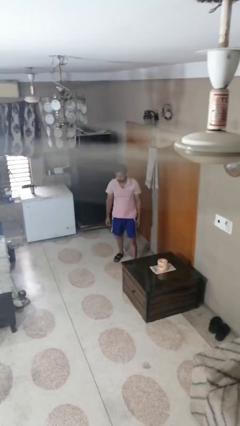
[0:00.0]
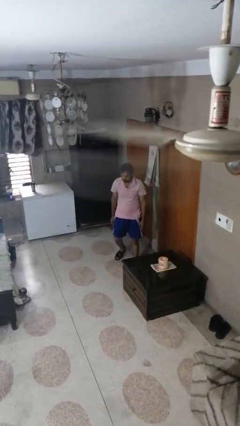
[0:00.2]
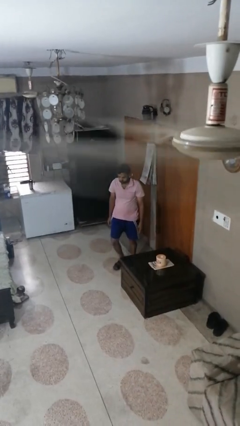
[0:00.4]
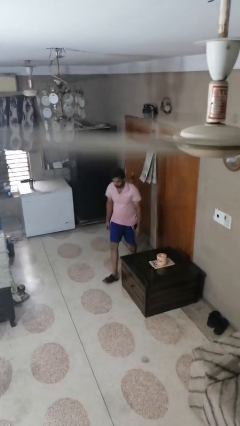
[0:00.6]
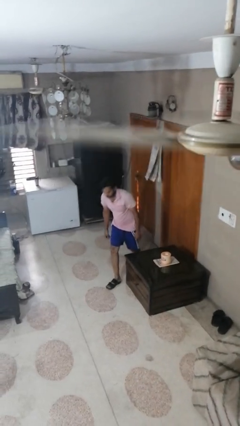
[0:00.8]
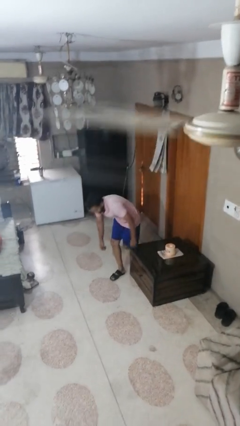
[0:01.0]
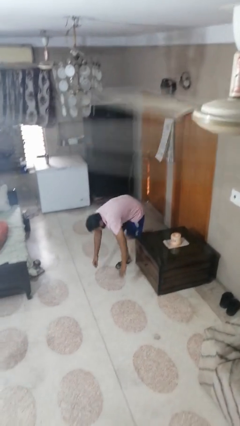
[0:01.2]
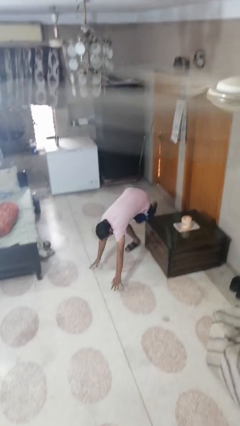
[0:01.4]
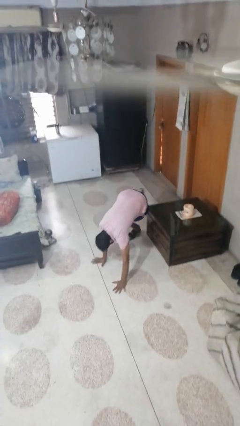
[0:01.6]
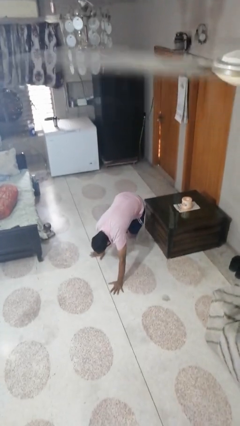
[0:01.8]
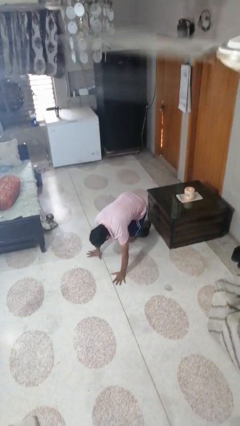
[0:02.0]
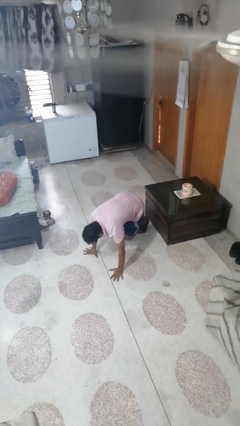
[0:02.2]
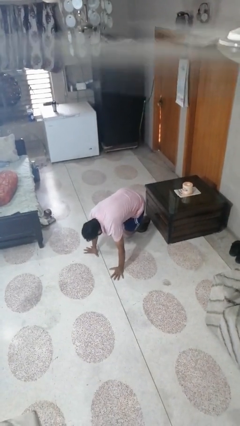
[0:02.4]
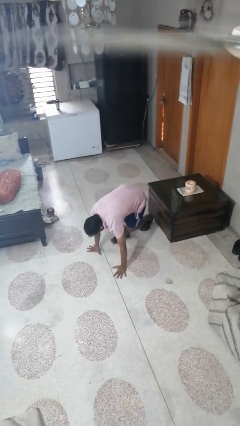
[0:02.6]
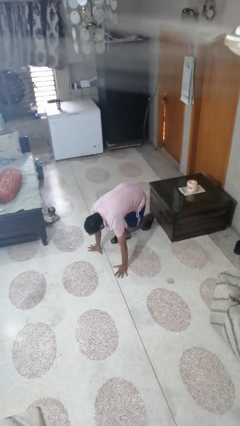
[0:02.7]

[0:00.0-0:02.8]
person bumps into table

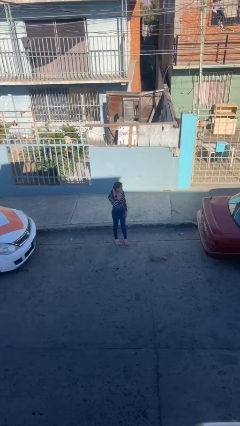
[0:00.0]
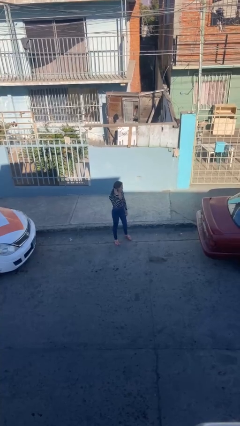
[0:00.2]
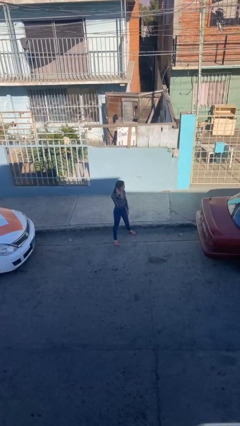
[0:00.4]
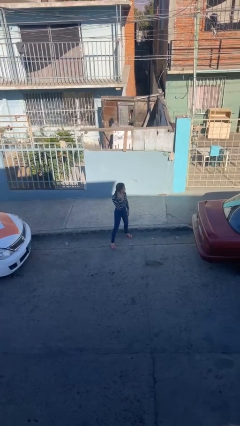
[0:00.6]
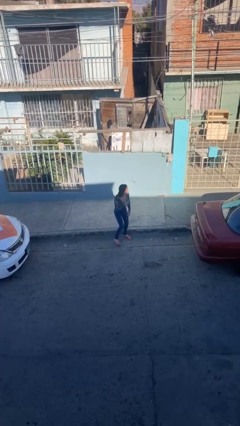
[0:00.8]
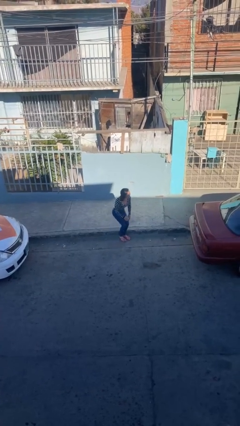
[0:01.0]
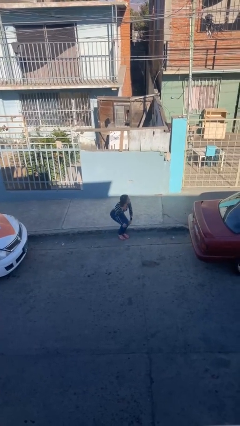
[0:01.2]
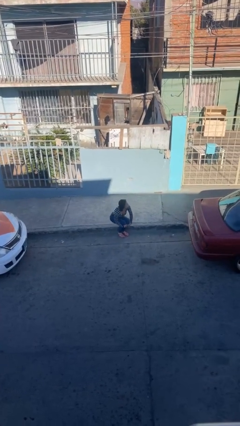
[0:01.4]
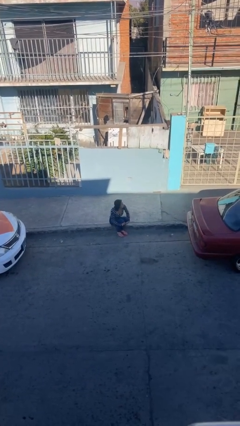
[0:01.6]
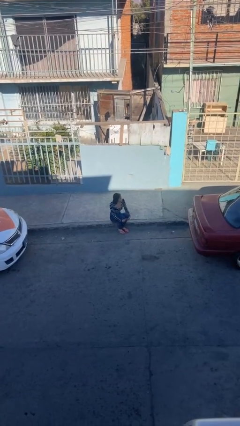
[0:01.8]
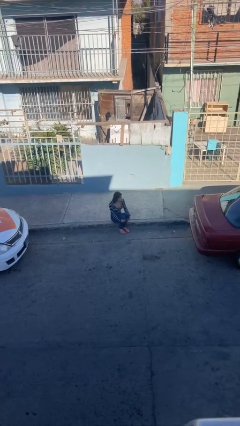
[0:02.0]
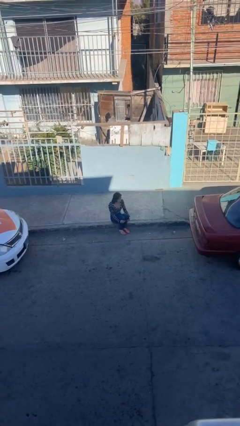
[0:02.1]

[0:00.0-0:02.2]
person sits down

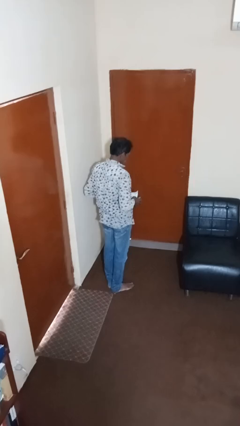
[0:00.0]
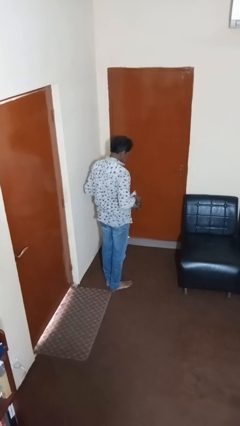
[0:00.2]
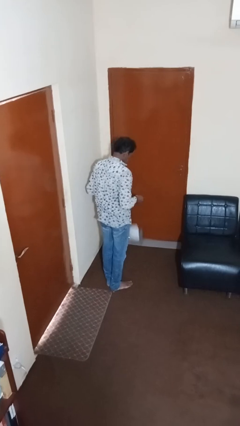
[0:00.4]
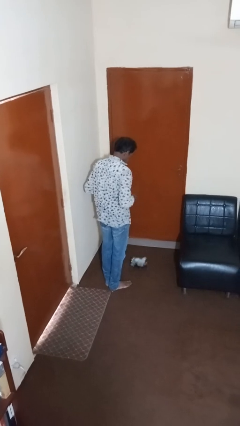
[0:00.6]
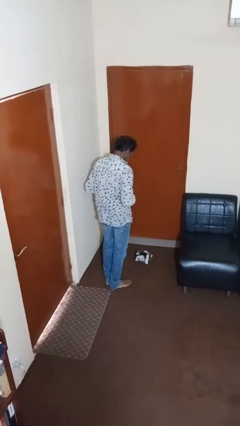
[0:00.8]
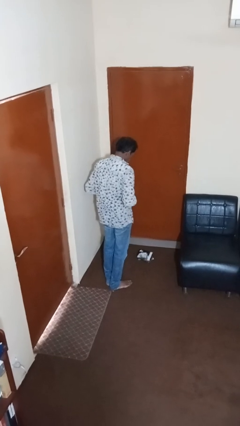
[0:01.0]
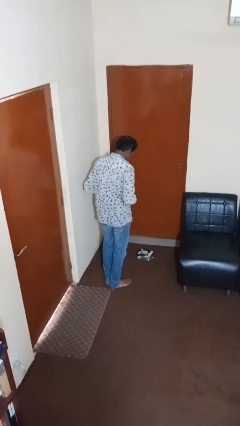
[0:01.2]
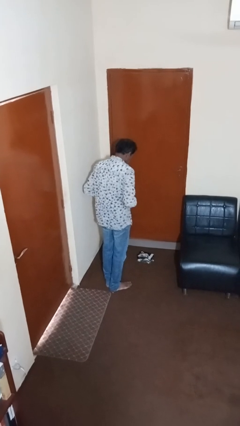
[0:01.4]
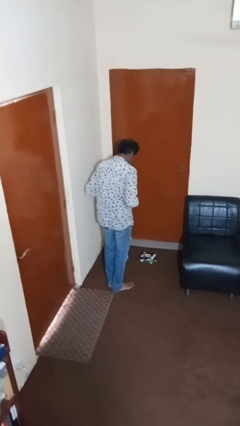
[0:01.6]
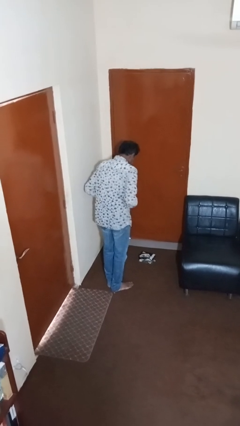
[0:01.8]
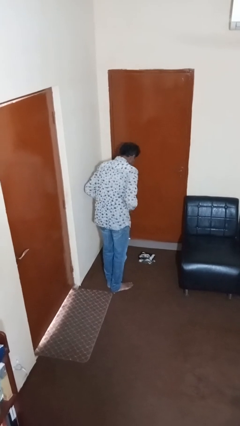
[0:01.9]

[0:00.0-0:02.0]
person drops object

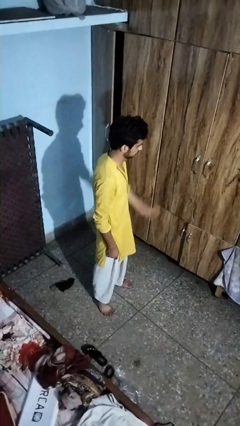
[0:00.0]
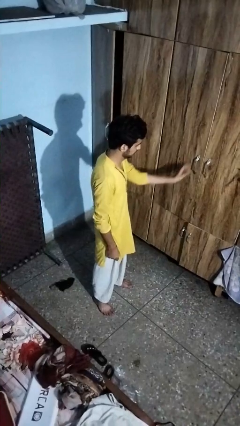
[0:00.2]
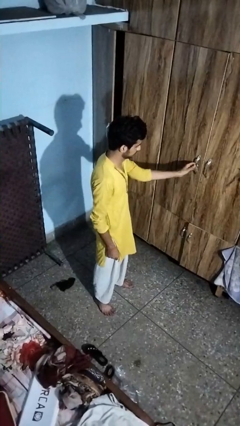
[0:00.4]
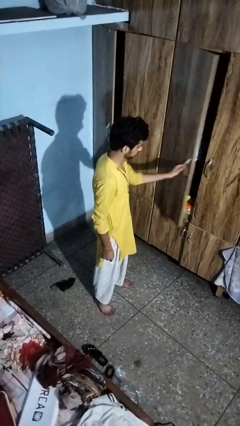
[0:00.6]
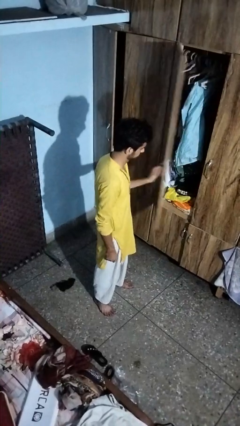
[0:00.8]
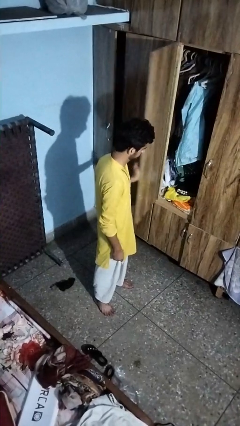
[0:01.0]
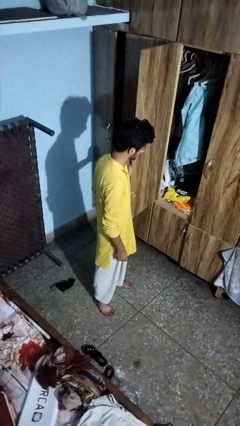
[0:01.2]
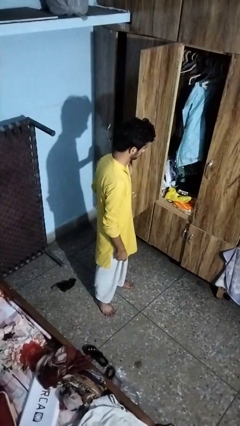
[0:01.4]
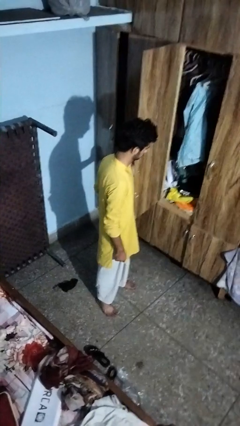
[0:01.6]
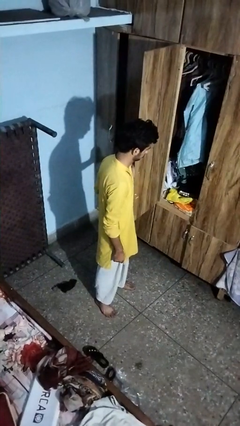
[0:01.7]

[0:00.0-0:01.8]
person opens closet door

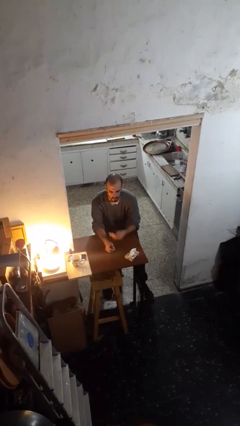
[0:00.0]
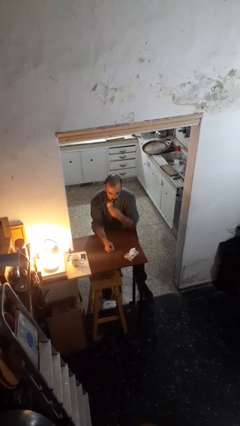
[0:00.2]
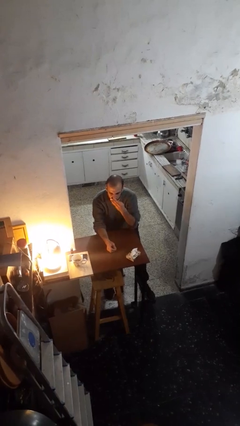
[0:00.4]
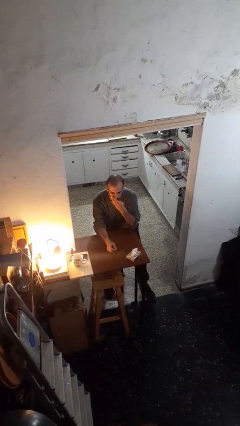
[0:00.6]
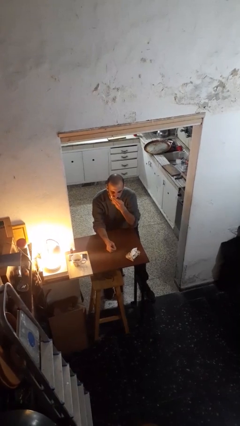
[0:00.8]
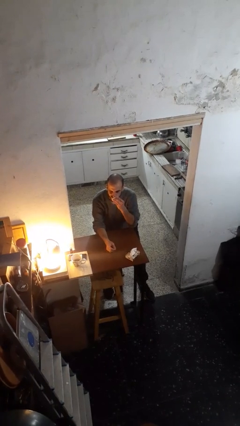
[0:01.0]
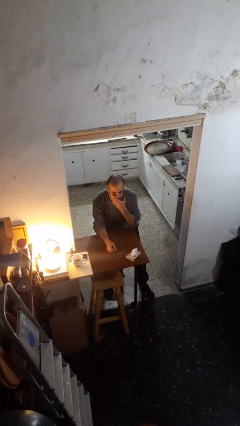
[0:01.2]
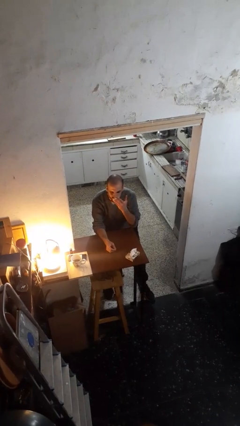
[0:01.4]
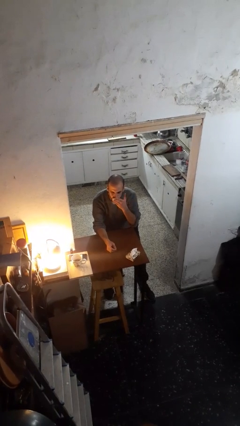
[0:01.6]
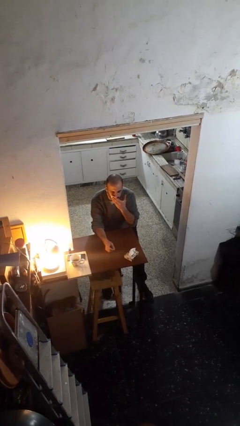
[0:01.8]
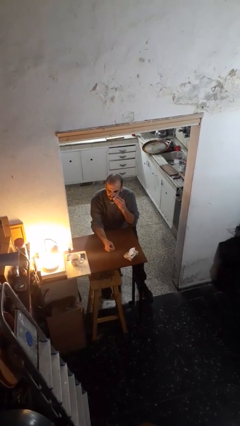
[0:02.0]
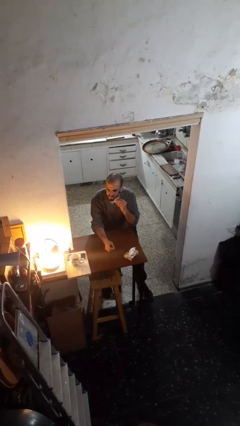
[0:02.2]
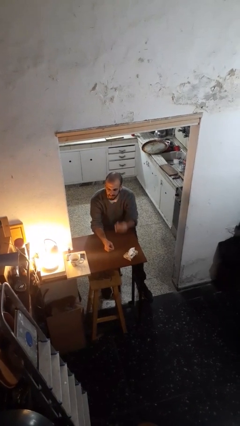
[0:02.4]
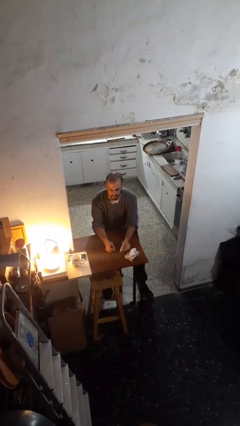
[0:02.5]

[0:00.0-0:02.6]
person wipes mouth with napkin

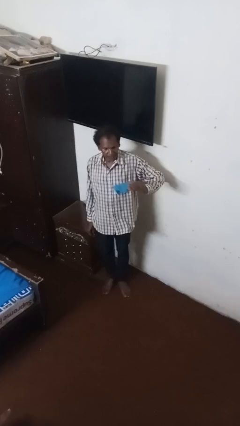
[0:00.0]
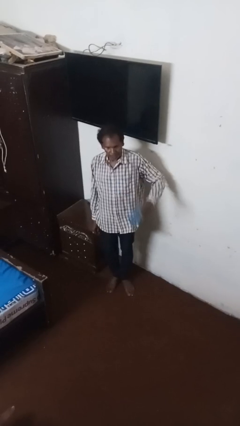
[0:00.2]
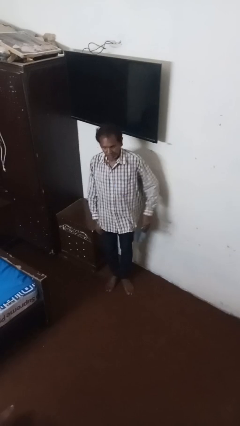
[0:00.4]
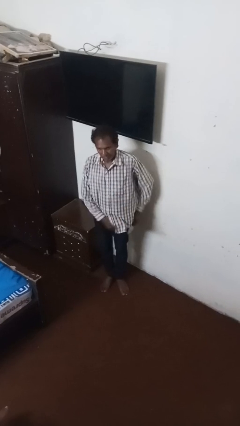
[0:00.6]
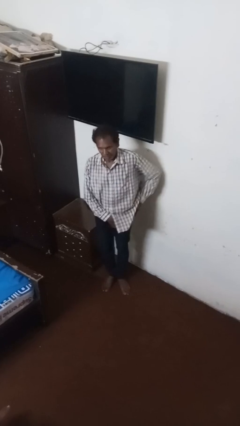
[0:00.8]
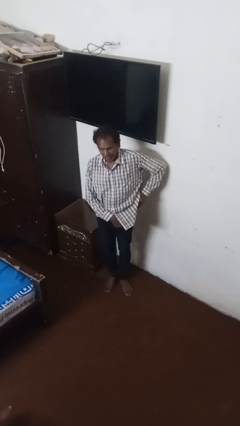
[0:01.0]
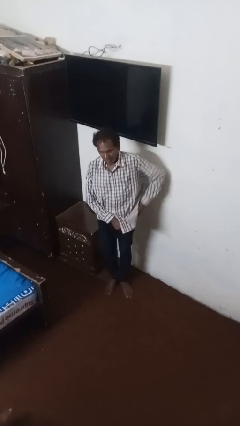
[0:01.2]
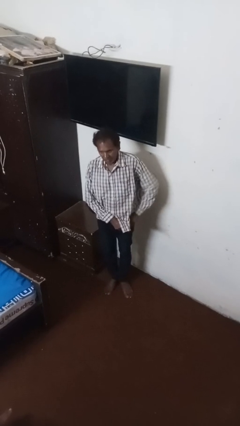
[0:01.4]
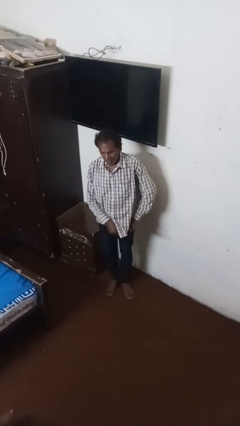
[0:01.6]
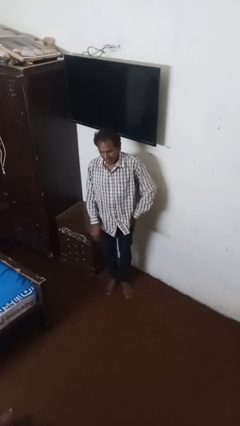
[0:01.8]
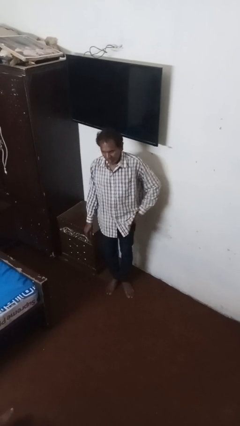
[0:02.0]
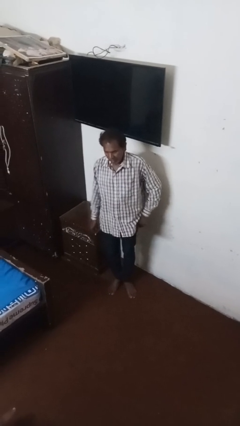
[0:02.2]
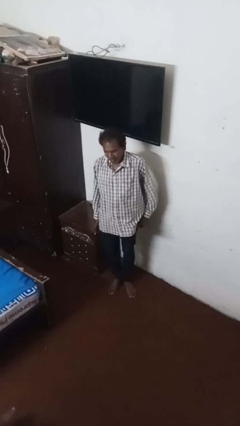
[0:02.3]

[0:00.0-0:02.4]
person puts phone into pocket

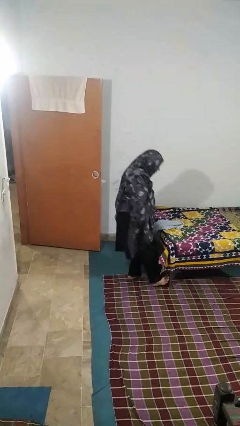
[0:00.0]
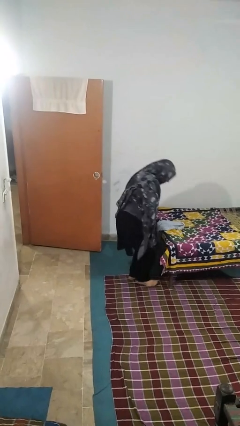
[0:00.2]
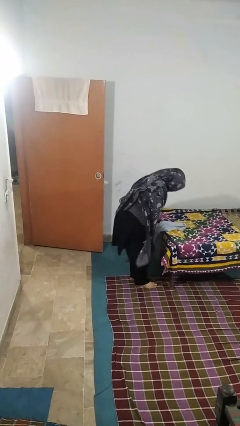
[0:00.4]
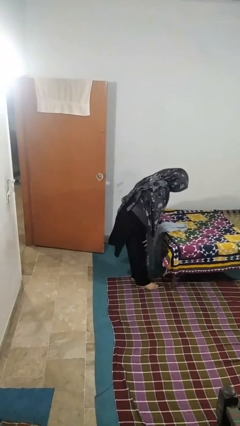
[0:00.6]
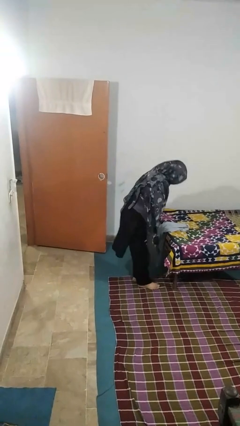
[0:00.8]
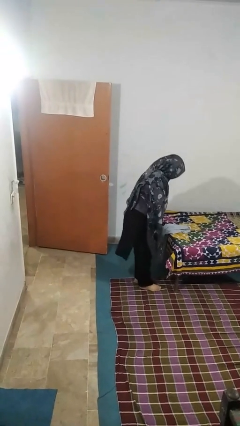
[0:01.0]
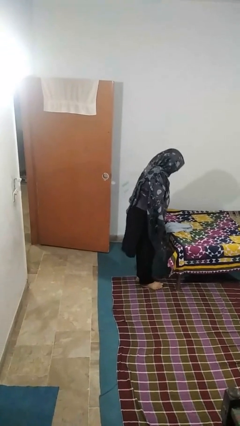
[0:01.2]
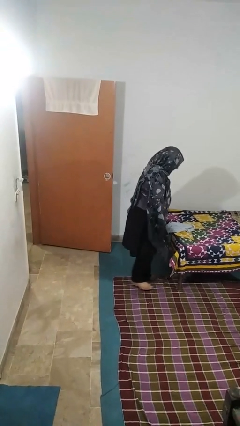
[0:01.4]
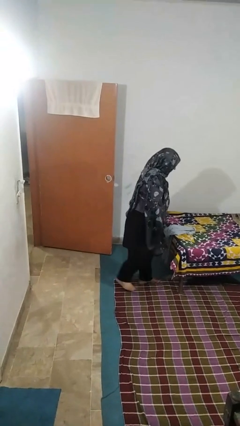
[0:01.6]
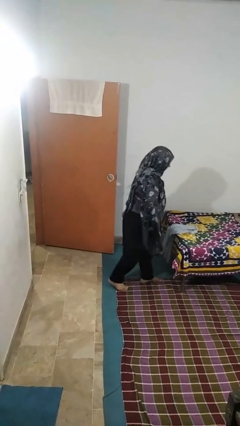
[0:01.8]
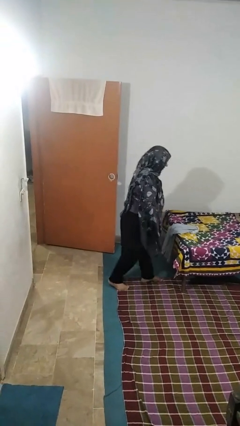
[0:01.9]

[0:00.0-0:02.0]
person stubs toe

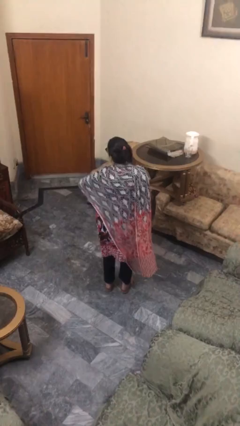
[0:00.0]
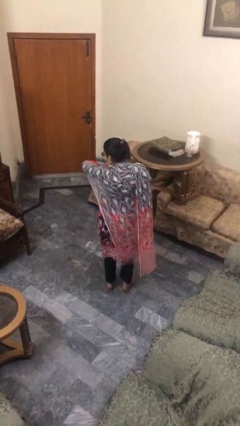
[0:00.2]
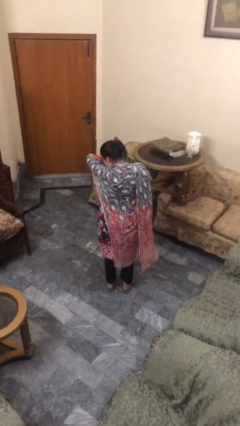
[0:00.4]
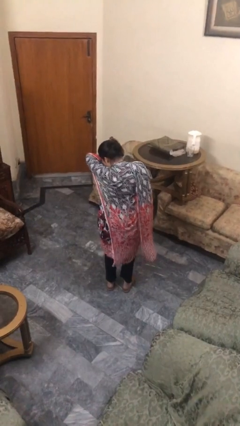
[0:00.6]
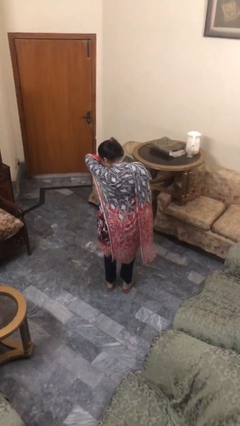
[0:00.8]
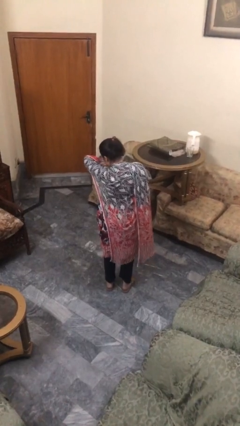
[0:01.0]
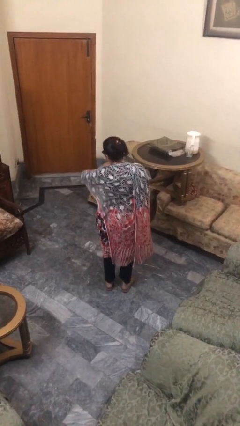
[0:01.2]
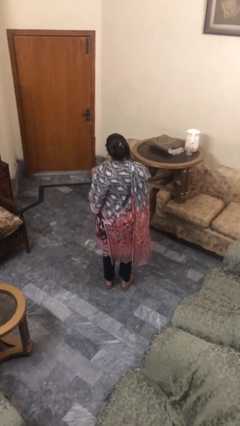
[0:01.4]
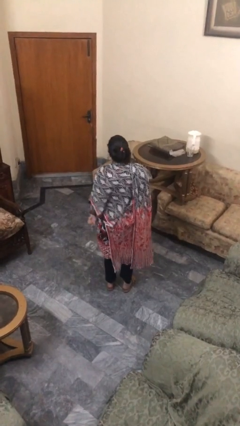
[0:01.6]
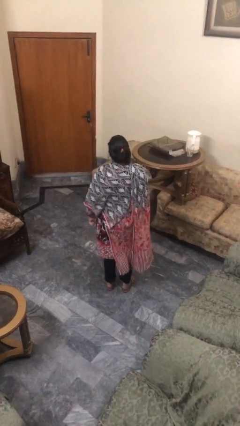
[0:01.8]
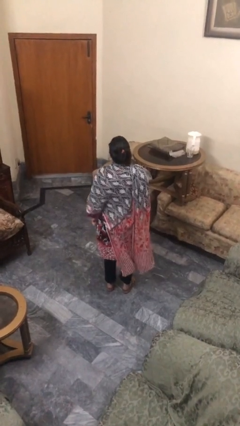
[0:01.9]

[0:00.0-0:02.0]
person sneezes into arm
